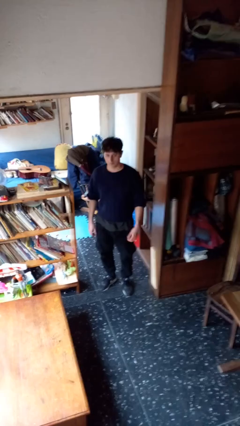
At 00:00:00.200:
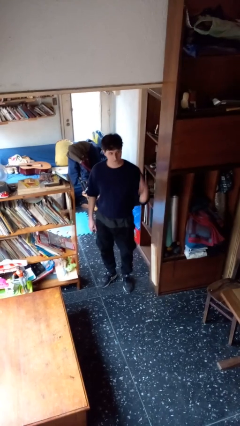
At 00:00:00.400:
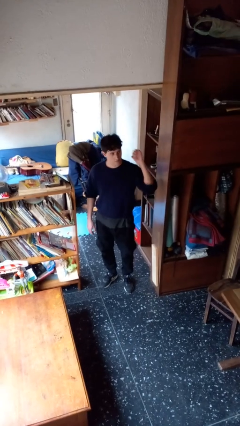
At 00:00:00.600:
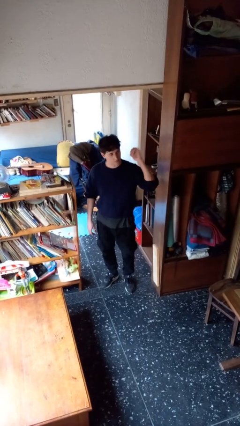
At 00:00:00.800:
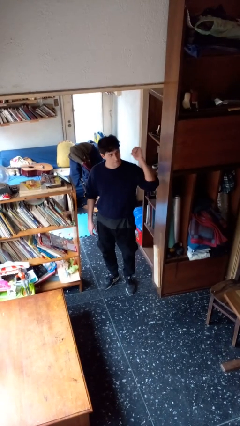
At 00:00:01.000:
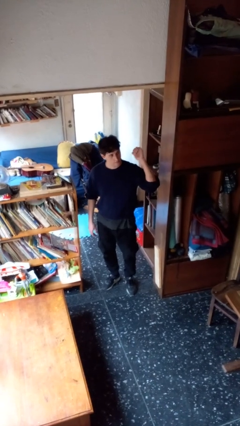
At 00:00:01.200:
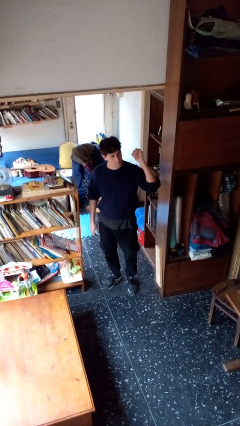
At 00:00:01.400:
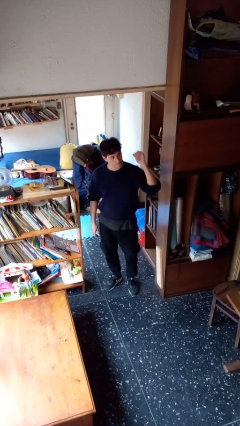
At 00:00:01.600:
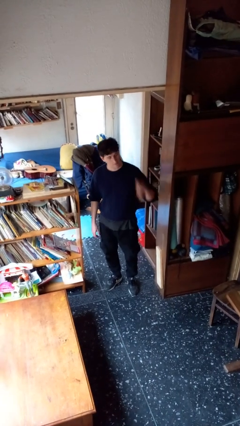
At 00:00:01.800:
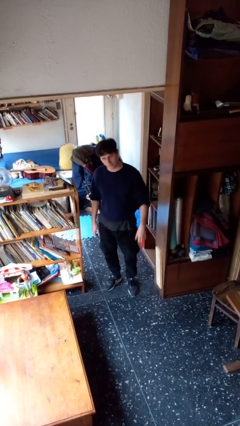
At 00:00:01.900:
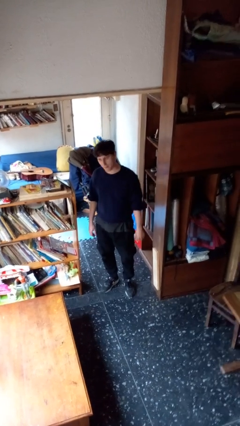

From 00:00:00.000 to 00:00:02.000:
person gestures behind me

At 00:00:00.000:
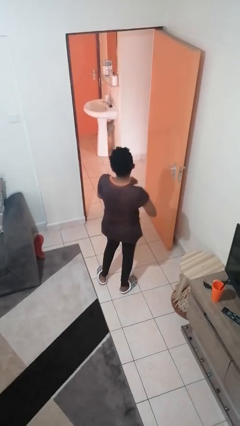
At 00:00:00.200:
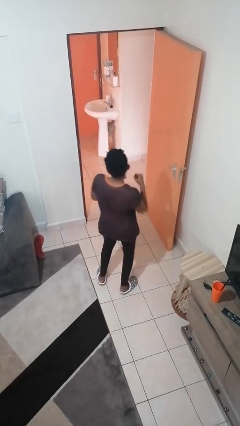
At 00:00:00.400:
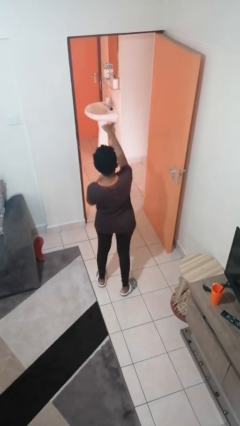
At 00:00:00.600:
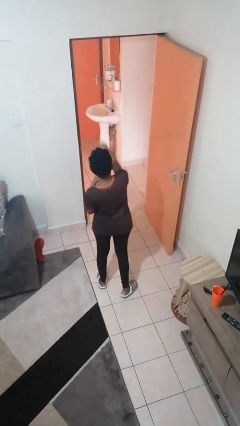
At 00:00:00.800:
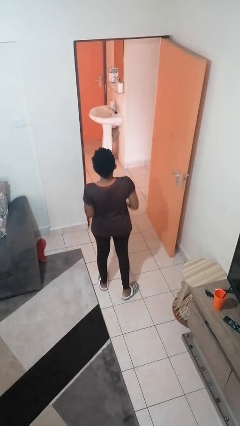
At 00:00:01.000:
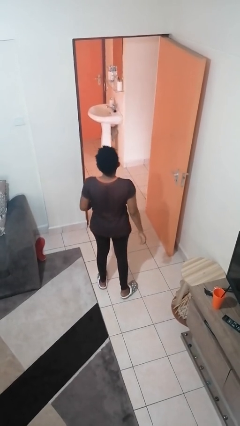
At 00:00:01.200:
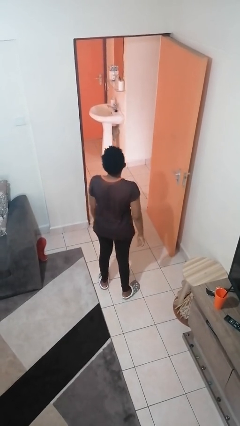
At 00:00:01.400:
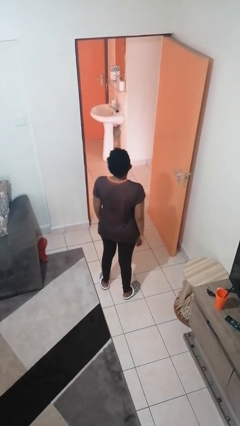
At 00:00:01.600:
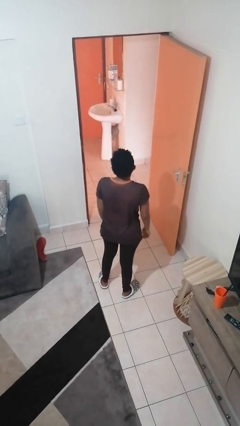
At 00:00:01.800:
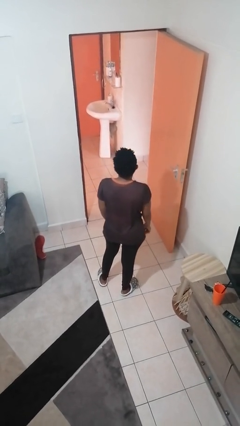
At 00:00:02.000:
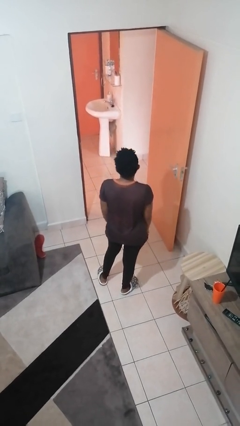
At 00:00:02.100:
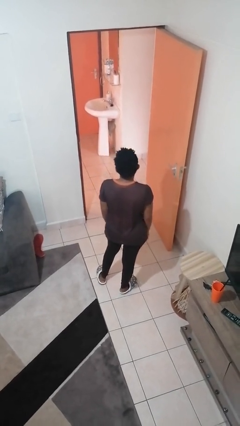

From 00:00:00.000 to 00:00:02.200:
person punches

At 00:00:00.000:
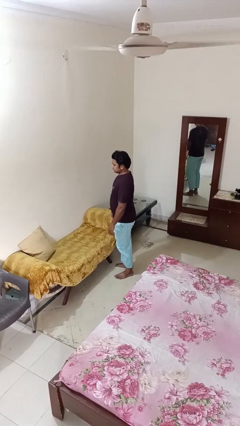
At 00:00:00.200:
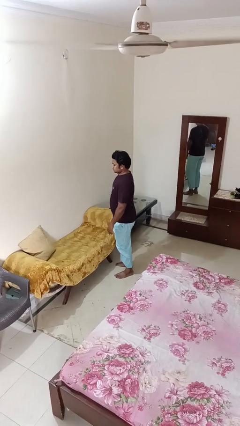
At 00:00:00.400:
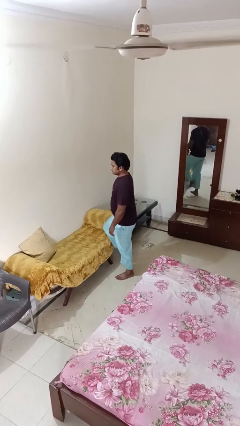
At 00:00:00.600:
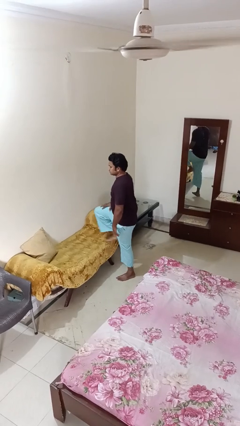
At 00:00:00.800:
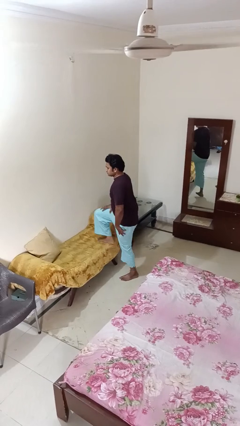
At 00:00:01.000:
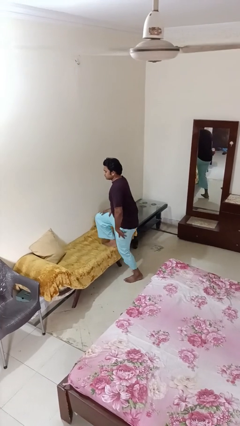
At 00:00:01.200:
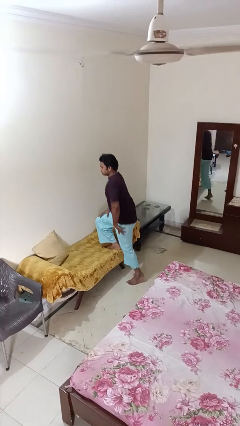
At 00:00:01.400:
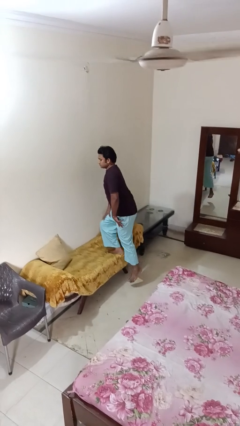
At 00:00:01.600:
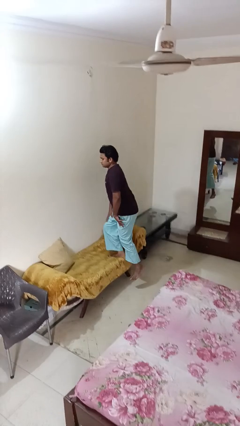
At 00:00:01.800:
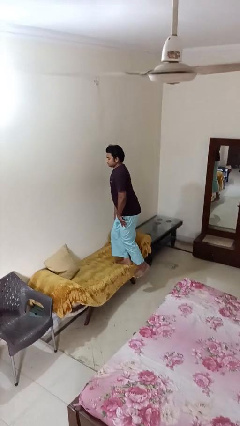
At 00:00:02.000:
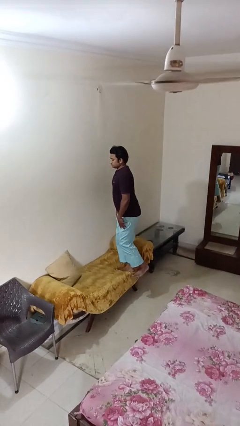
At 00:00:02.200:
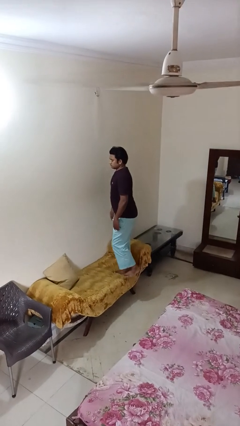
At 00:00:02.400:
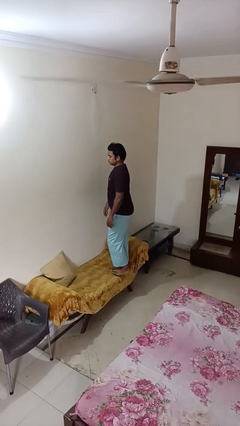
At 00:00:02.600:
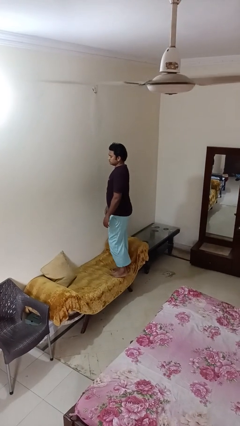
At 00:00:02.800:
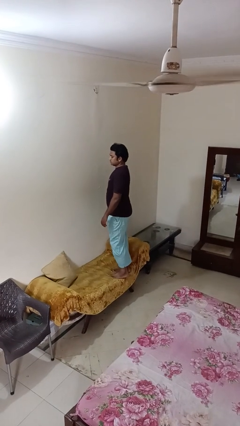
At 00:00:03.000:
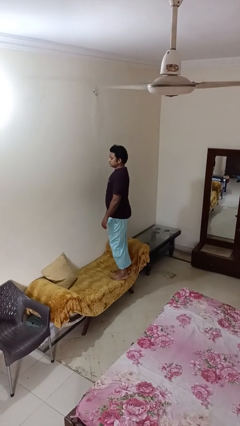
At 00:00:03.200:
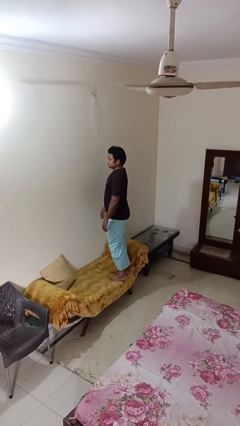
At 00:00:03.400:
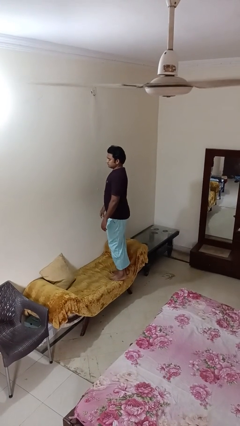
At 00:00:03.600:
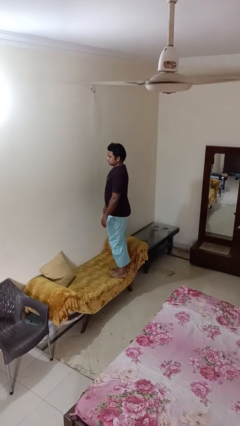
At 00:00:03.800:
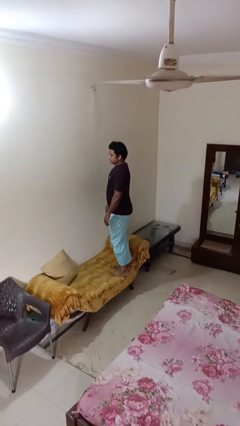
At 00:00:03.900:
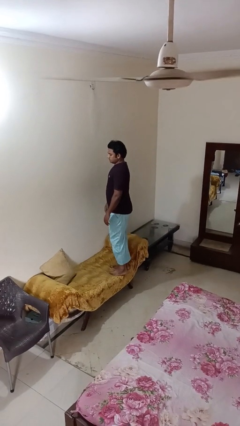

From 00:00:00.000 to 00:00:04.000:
person climbs on couch

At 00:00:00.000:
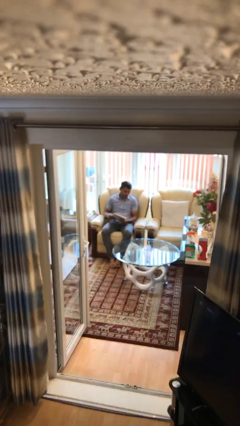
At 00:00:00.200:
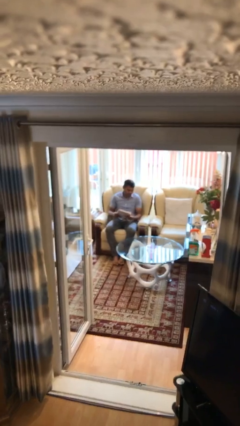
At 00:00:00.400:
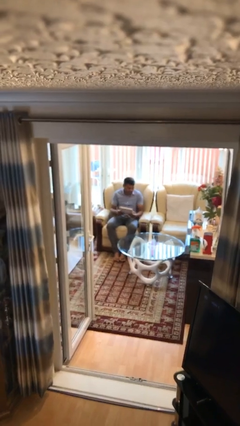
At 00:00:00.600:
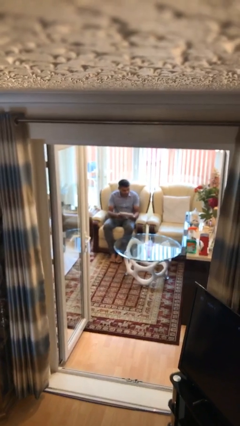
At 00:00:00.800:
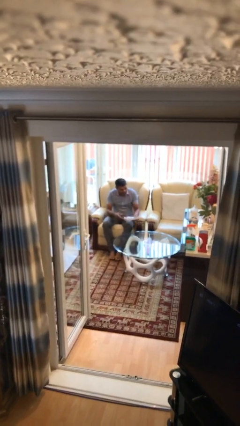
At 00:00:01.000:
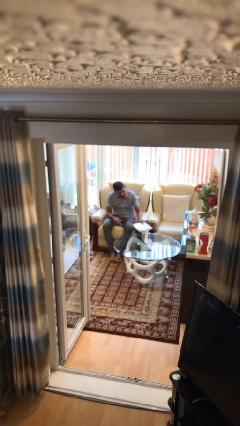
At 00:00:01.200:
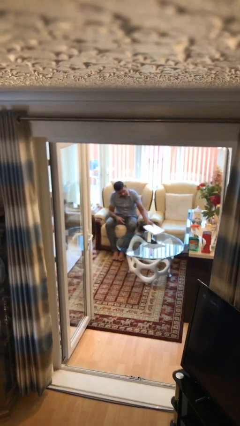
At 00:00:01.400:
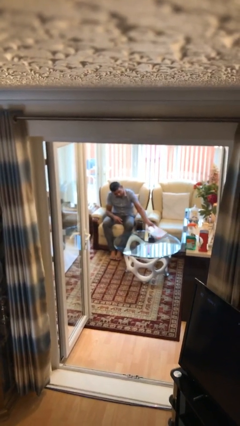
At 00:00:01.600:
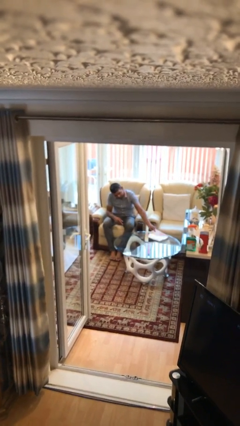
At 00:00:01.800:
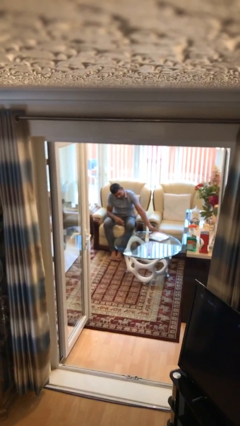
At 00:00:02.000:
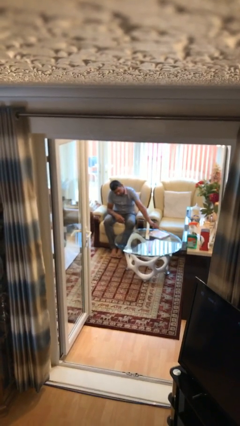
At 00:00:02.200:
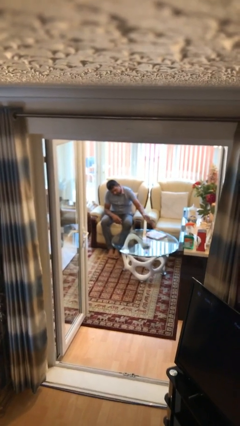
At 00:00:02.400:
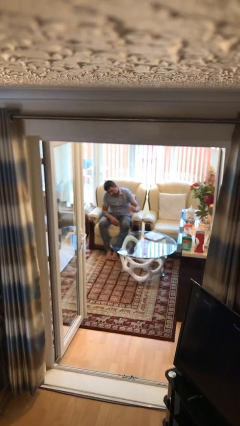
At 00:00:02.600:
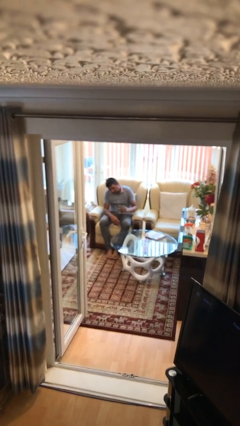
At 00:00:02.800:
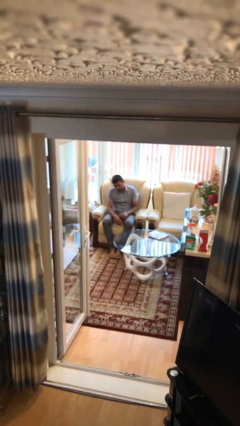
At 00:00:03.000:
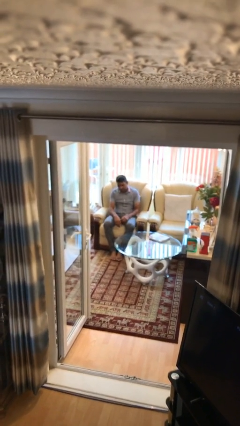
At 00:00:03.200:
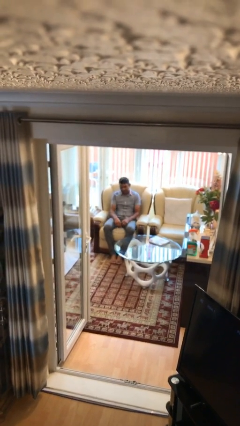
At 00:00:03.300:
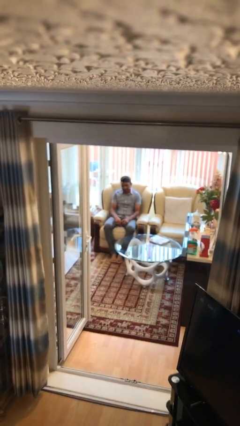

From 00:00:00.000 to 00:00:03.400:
person puts down object on table

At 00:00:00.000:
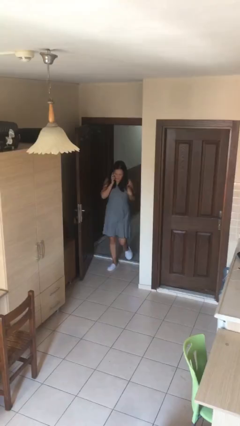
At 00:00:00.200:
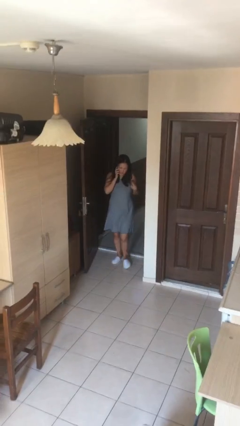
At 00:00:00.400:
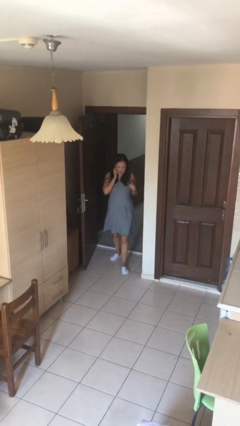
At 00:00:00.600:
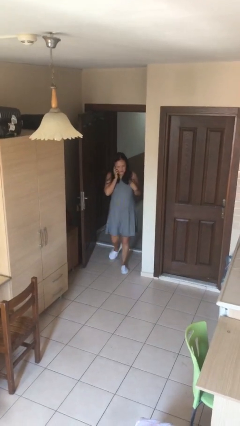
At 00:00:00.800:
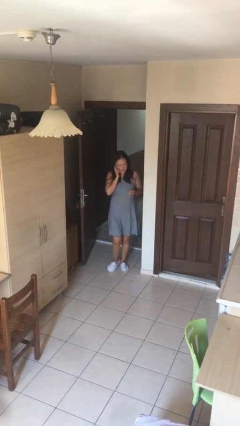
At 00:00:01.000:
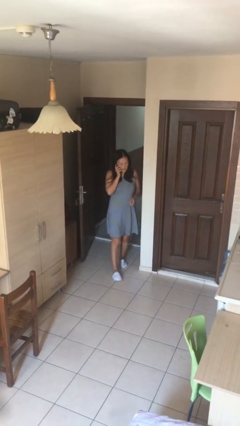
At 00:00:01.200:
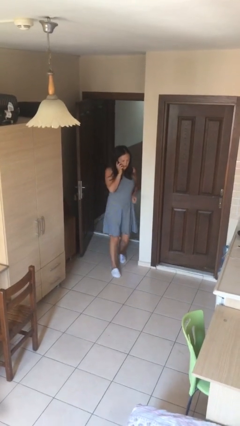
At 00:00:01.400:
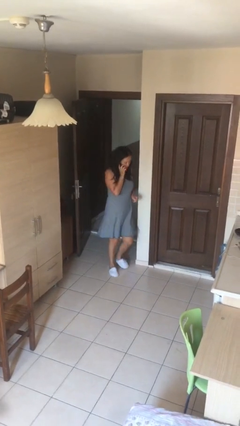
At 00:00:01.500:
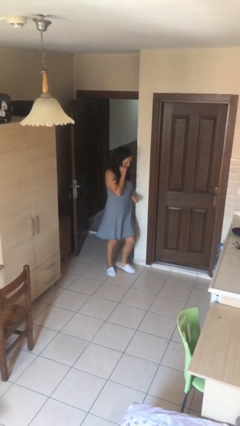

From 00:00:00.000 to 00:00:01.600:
person enters scene through structure

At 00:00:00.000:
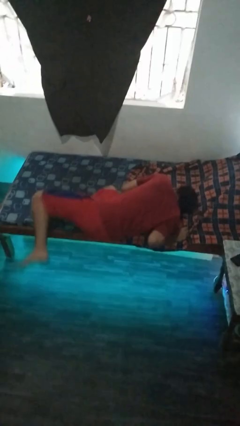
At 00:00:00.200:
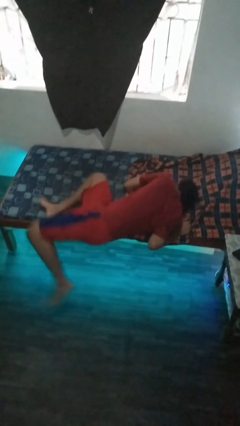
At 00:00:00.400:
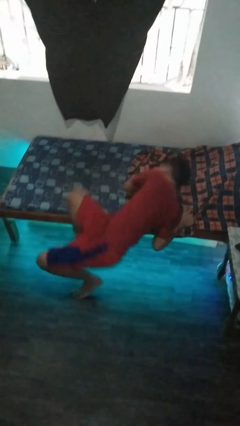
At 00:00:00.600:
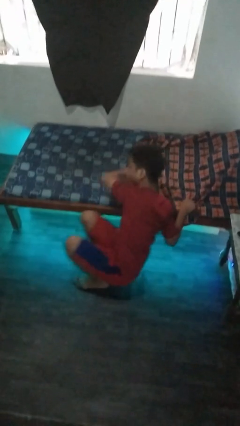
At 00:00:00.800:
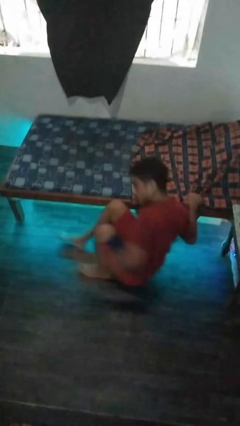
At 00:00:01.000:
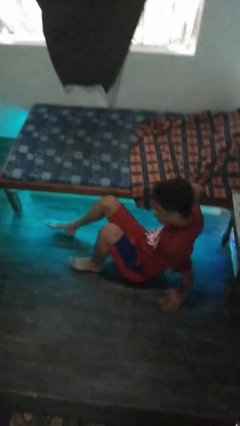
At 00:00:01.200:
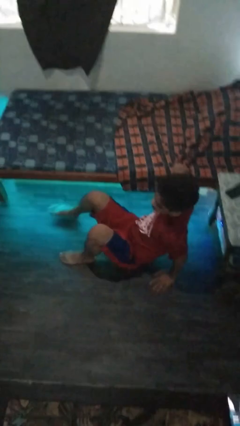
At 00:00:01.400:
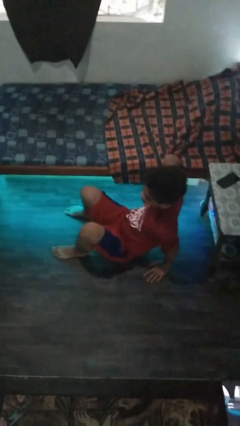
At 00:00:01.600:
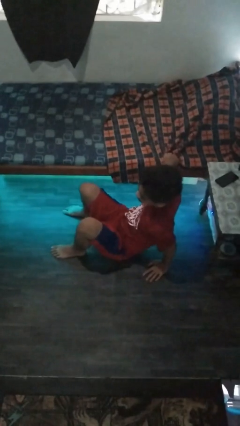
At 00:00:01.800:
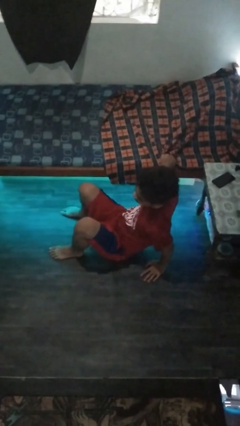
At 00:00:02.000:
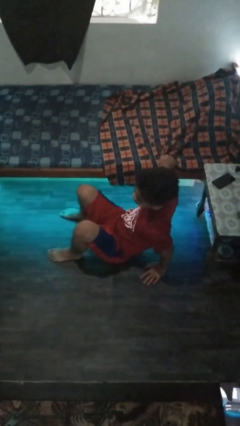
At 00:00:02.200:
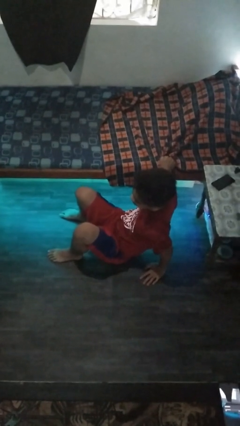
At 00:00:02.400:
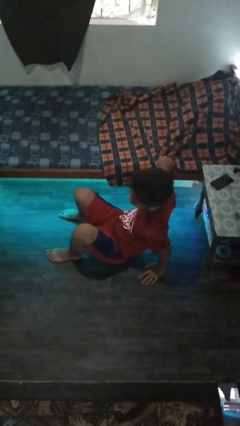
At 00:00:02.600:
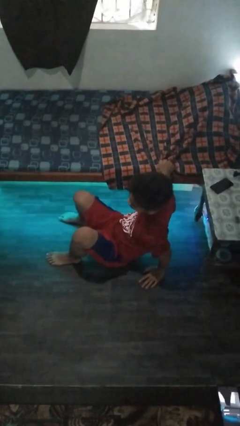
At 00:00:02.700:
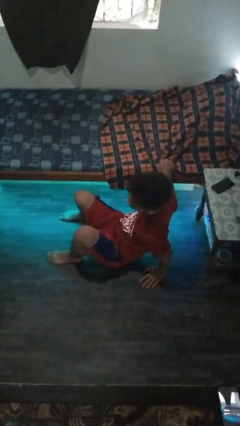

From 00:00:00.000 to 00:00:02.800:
person falls from bed

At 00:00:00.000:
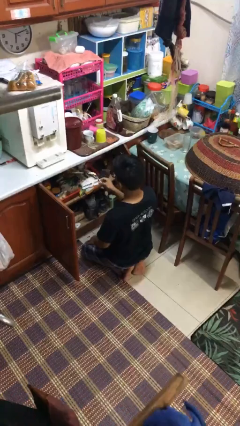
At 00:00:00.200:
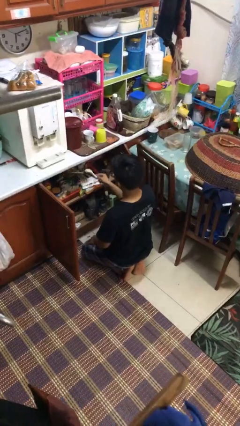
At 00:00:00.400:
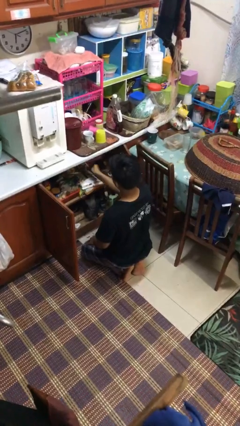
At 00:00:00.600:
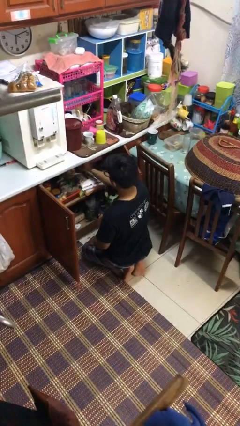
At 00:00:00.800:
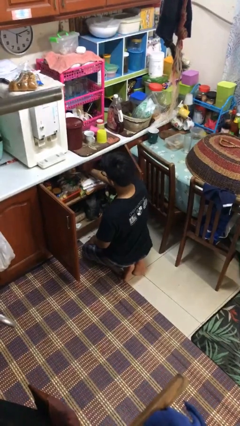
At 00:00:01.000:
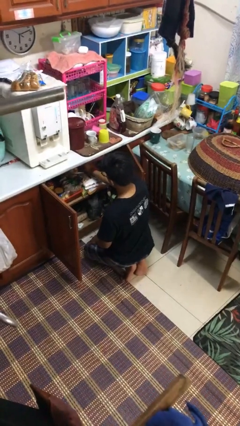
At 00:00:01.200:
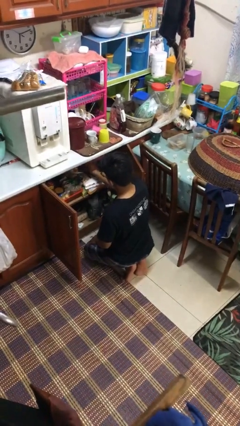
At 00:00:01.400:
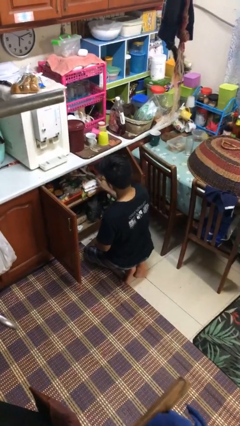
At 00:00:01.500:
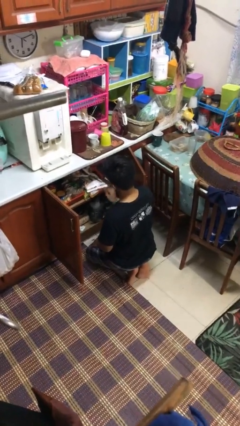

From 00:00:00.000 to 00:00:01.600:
person puts object into kitchen drawer
